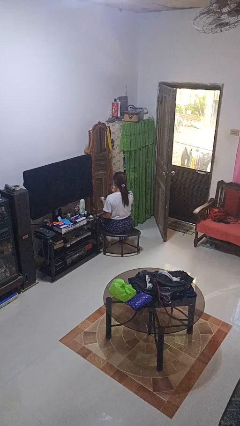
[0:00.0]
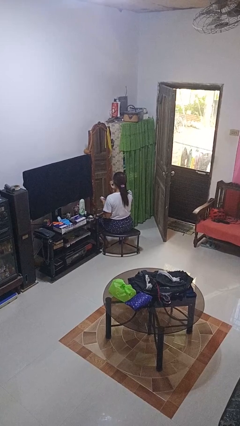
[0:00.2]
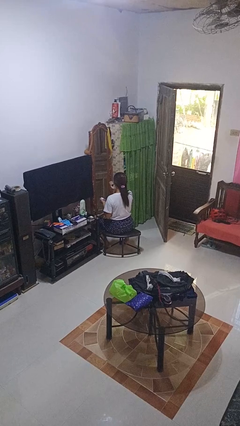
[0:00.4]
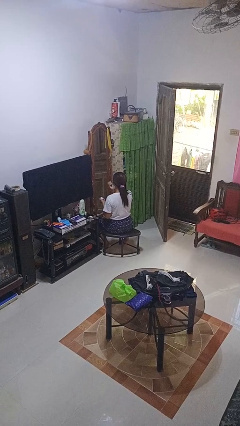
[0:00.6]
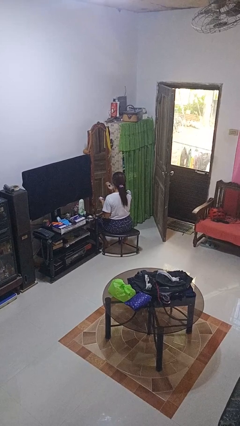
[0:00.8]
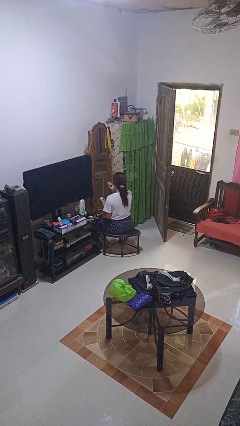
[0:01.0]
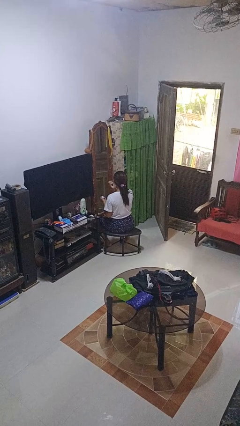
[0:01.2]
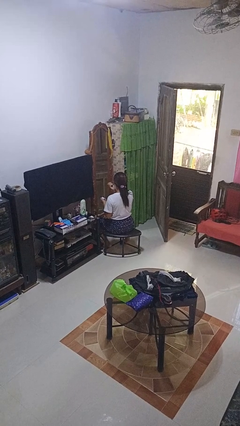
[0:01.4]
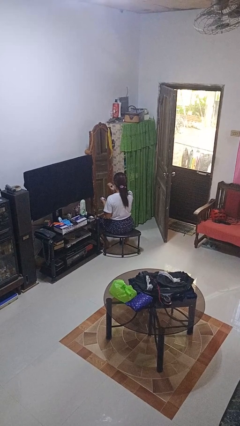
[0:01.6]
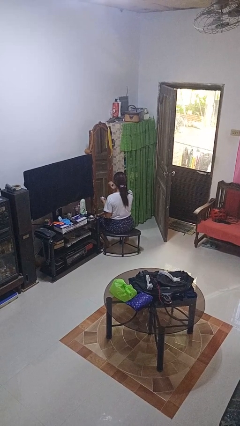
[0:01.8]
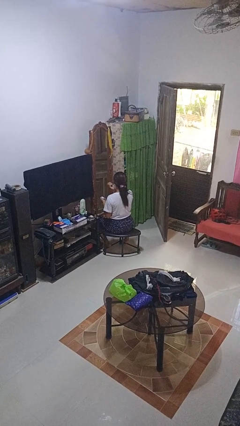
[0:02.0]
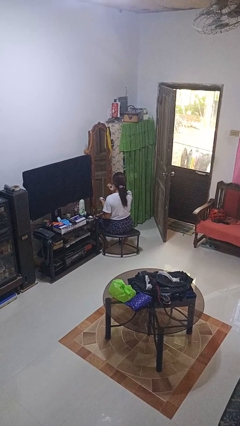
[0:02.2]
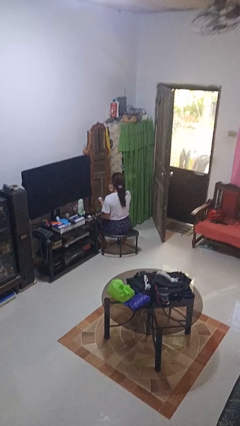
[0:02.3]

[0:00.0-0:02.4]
person applies eye makeup

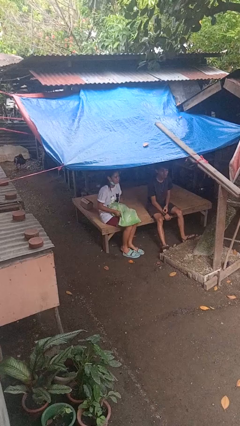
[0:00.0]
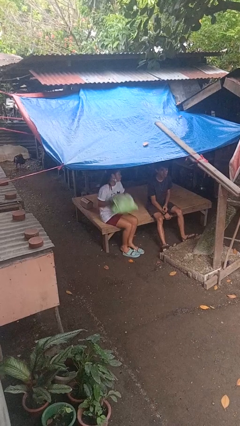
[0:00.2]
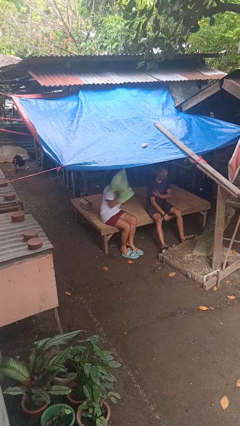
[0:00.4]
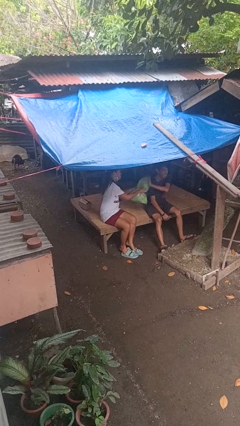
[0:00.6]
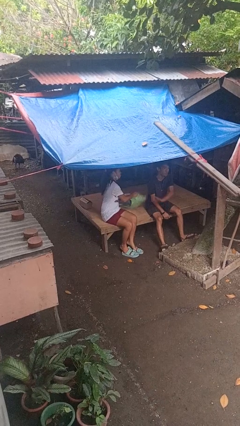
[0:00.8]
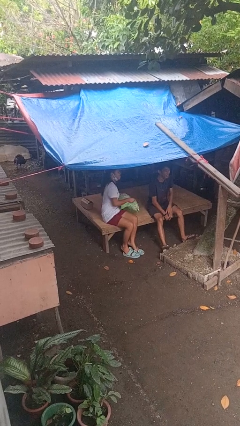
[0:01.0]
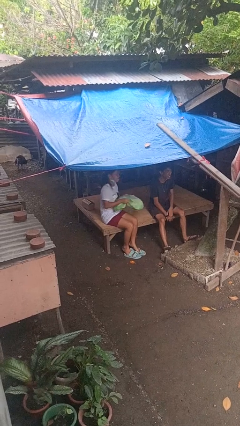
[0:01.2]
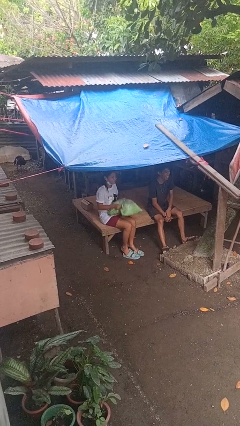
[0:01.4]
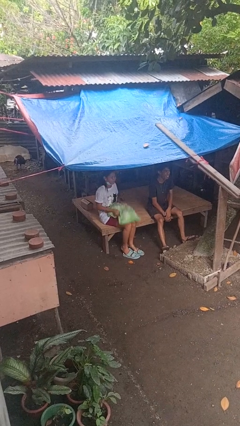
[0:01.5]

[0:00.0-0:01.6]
person hits person with pillow

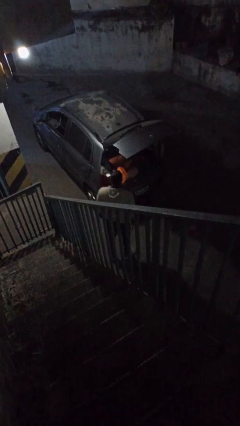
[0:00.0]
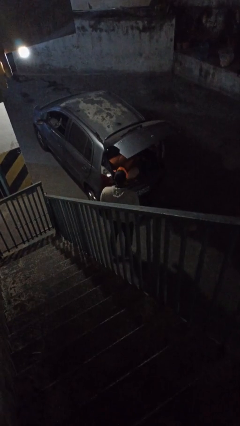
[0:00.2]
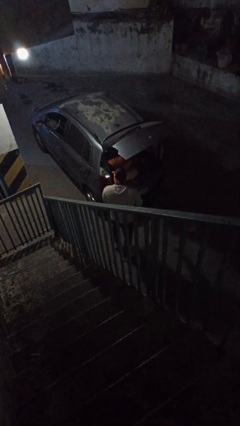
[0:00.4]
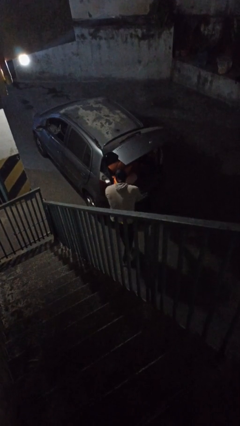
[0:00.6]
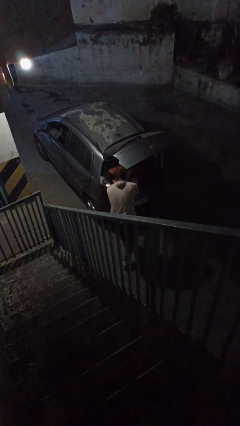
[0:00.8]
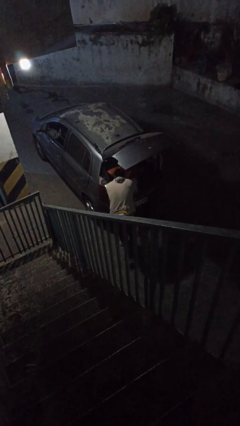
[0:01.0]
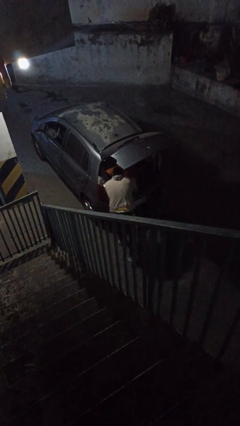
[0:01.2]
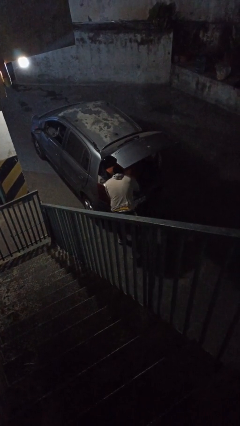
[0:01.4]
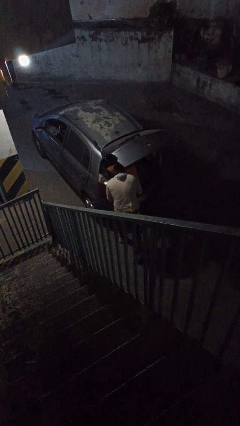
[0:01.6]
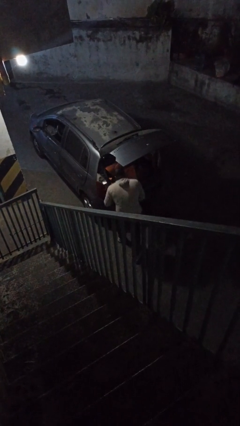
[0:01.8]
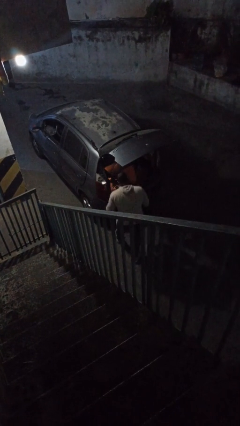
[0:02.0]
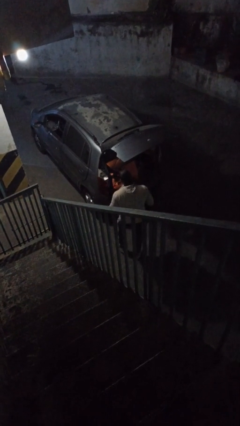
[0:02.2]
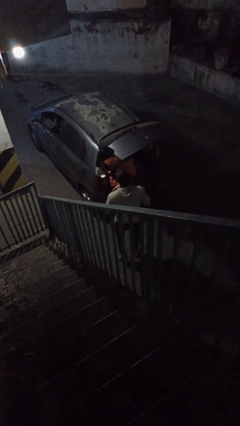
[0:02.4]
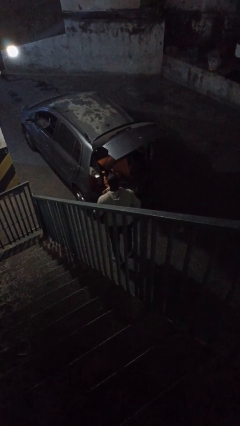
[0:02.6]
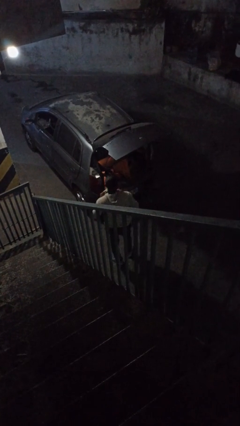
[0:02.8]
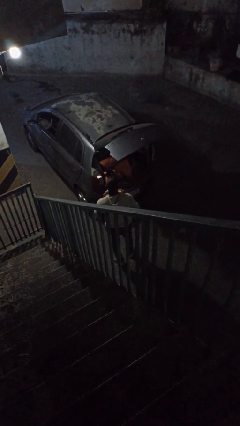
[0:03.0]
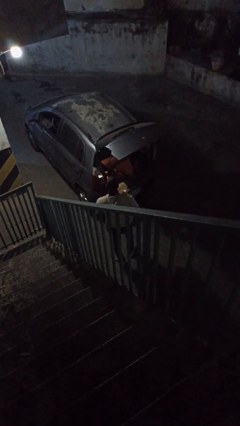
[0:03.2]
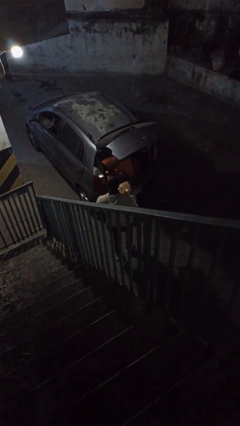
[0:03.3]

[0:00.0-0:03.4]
person unloads car

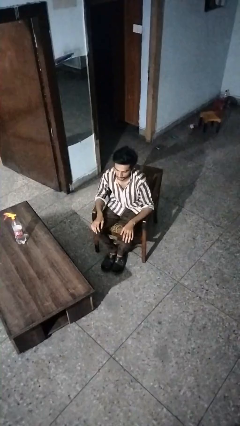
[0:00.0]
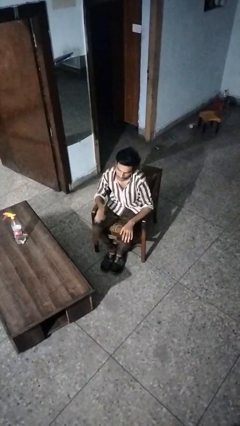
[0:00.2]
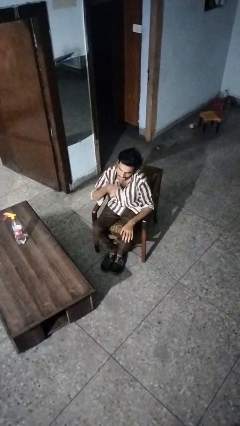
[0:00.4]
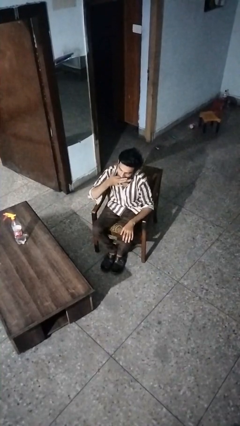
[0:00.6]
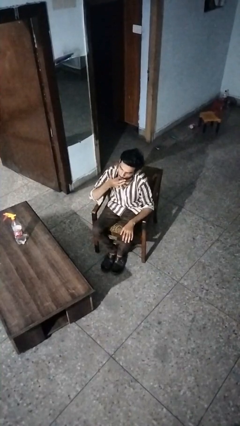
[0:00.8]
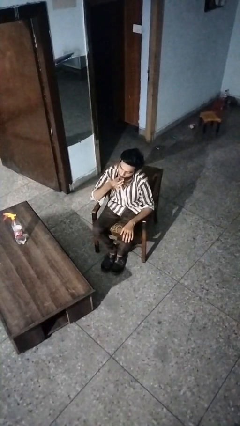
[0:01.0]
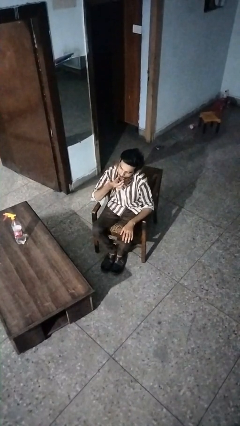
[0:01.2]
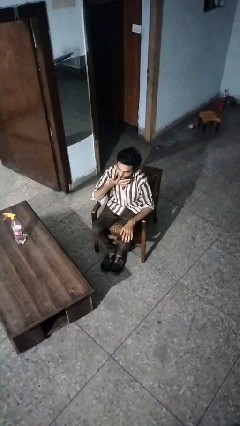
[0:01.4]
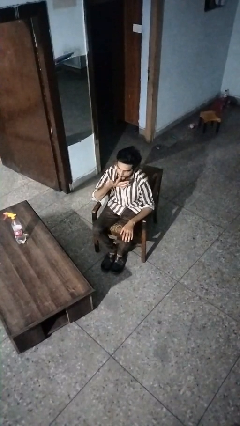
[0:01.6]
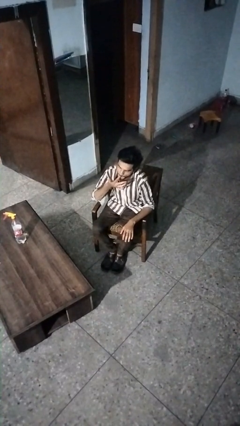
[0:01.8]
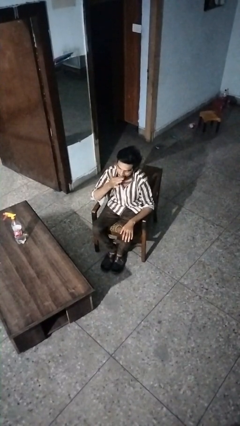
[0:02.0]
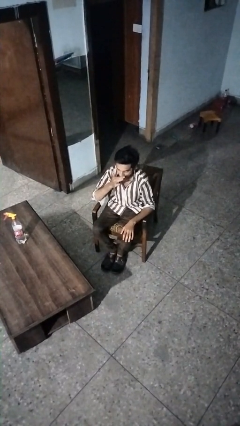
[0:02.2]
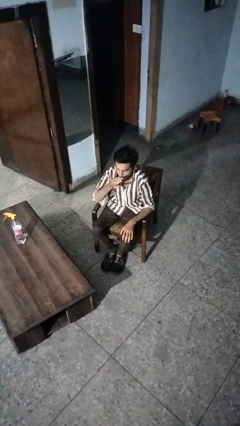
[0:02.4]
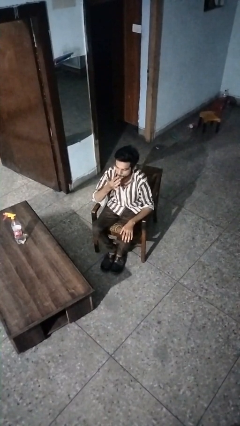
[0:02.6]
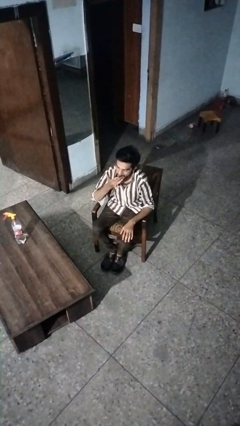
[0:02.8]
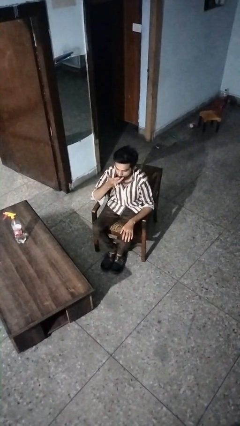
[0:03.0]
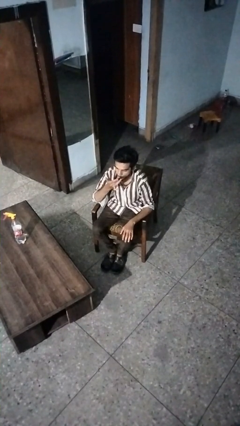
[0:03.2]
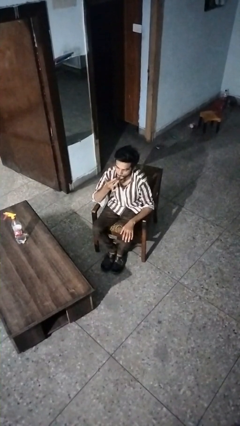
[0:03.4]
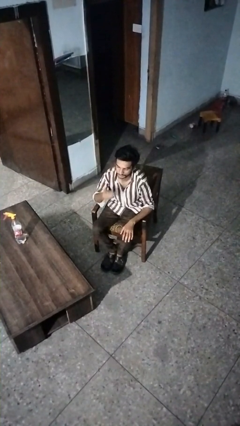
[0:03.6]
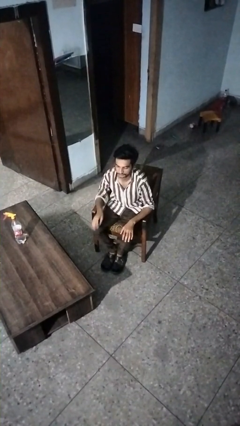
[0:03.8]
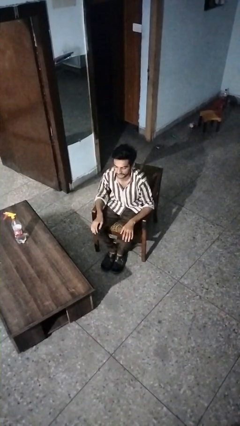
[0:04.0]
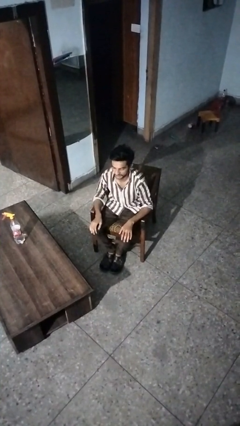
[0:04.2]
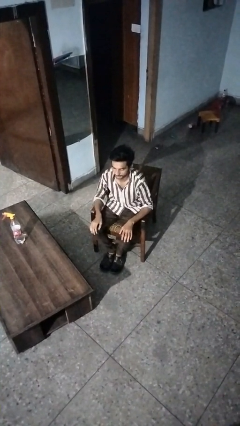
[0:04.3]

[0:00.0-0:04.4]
person licks fingers

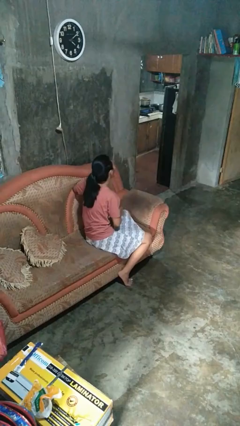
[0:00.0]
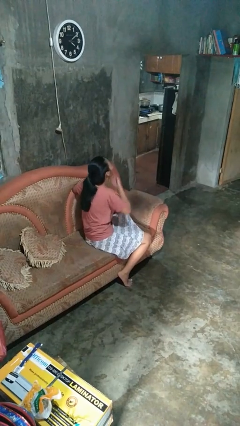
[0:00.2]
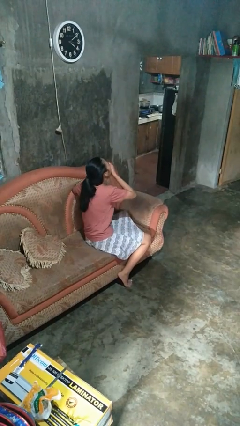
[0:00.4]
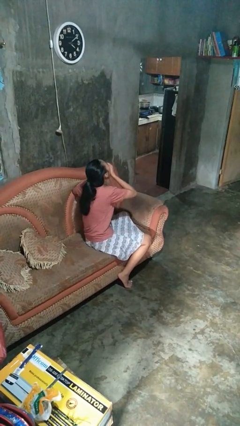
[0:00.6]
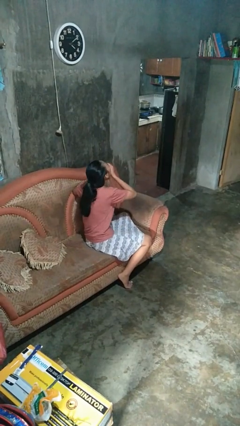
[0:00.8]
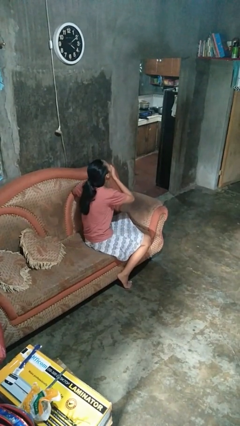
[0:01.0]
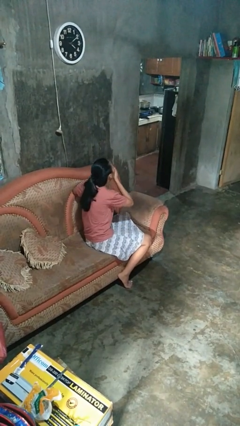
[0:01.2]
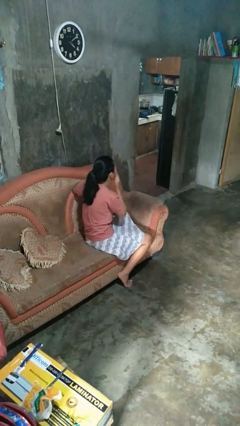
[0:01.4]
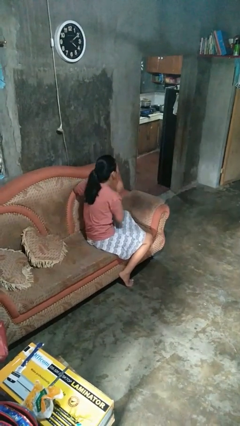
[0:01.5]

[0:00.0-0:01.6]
person yawns

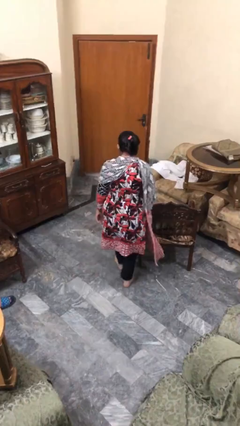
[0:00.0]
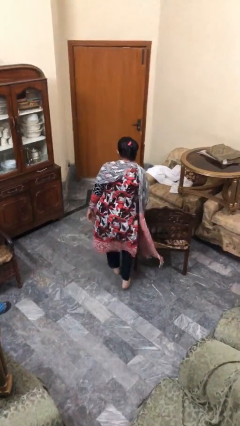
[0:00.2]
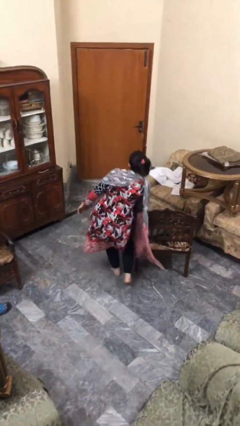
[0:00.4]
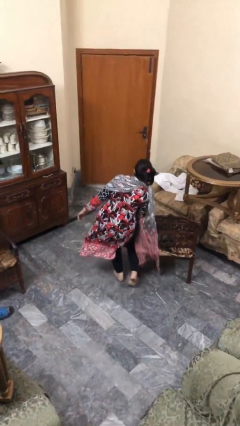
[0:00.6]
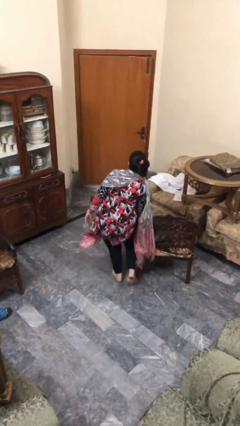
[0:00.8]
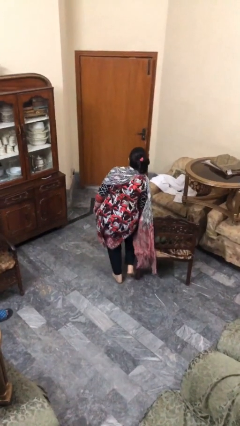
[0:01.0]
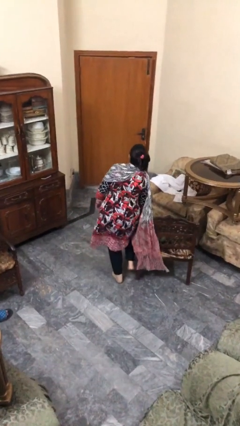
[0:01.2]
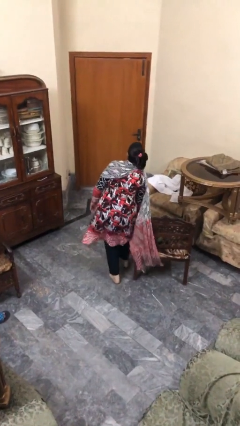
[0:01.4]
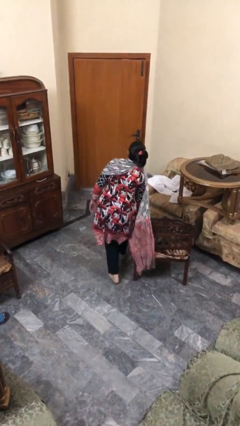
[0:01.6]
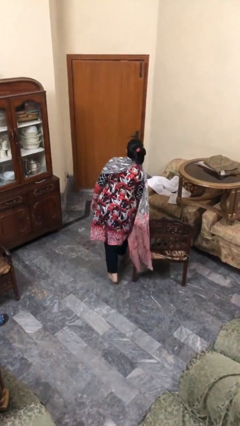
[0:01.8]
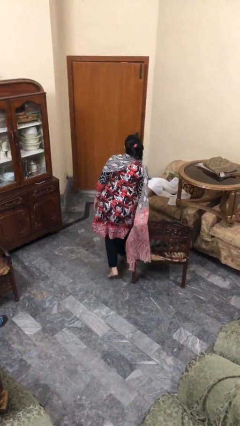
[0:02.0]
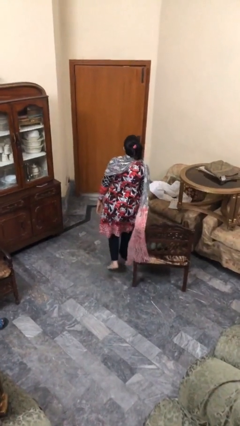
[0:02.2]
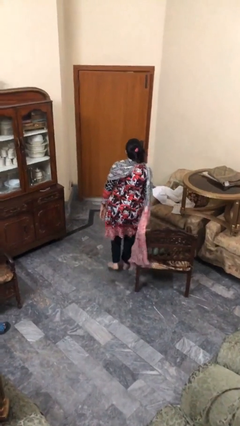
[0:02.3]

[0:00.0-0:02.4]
person stubs toe

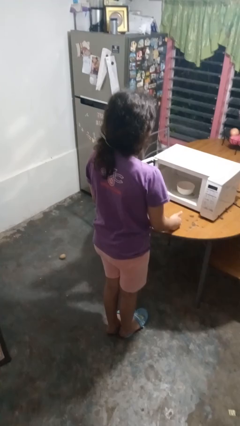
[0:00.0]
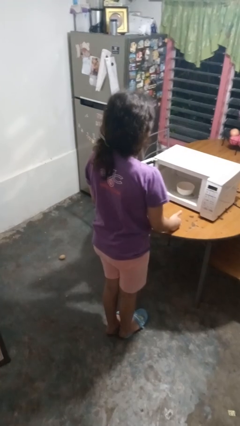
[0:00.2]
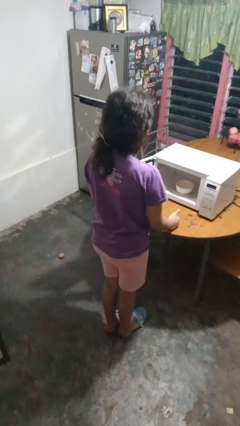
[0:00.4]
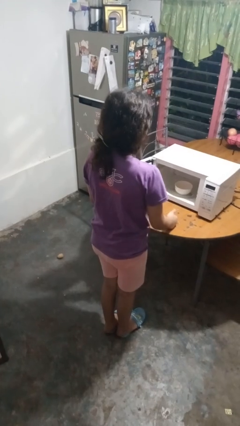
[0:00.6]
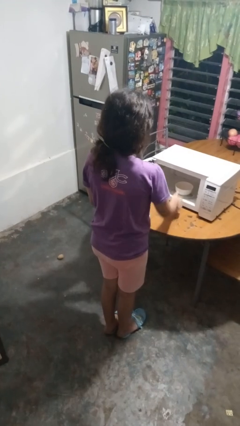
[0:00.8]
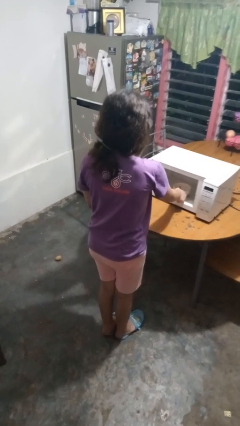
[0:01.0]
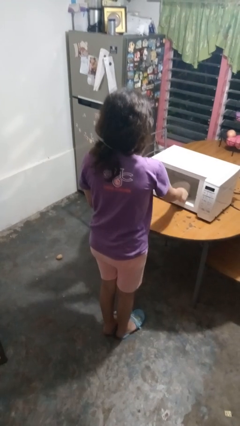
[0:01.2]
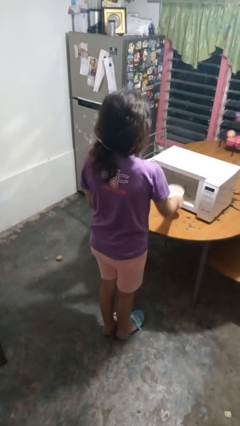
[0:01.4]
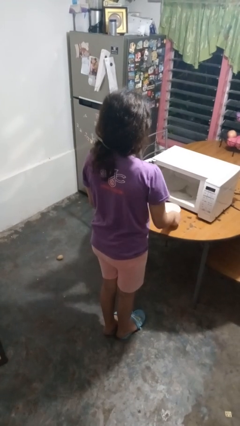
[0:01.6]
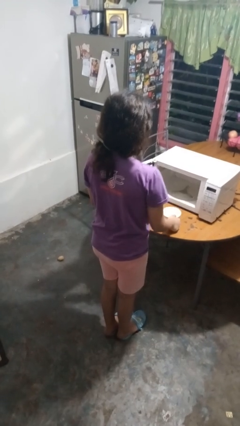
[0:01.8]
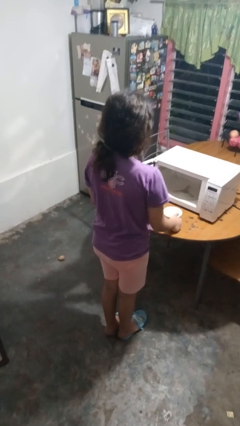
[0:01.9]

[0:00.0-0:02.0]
person takes object from microwave
